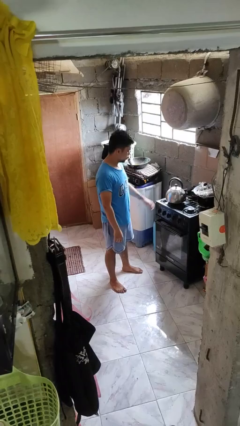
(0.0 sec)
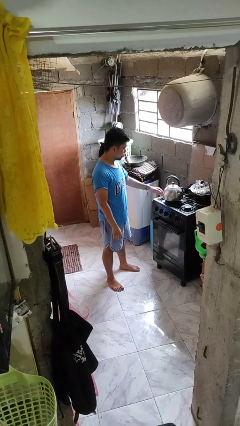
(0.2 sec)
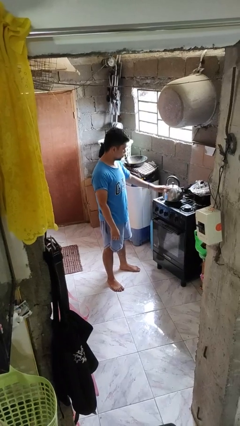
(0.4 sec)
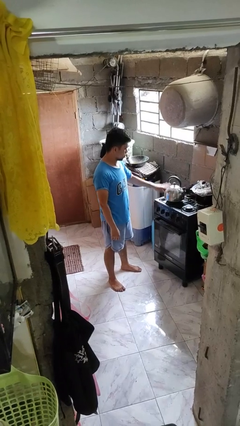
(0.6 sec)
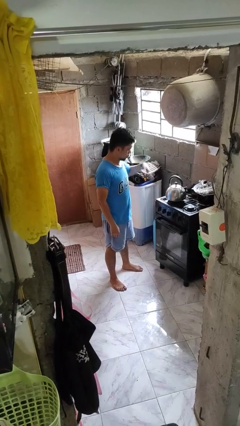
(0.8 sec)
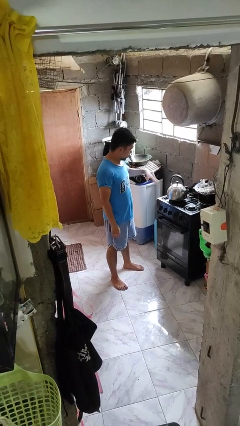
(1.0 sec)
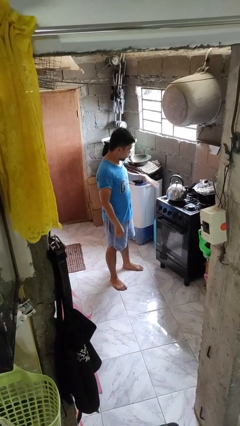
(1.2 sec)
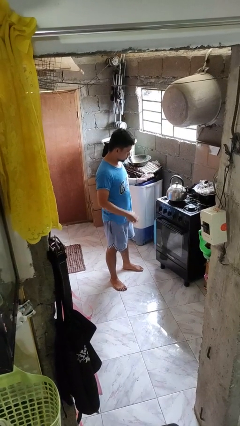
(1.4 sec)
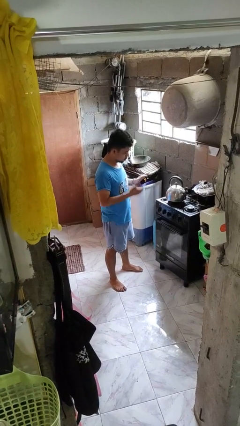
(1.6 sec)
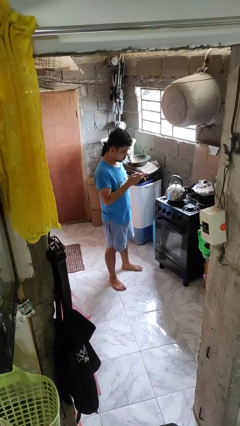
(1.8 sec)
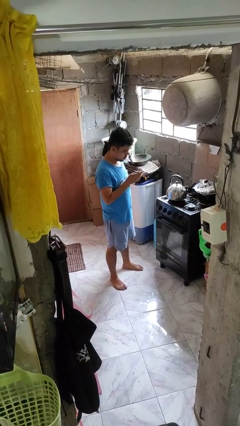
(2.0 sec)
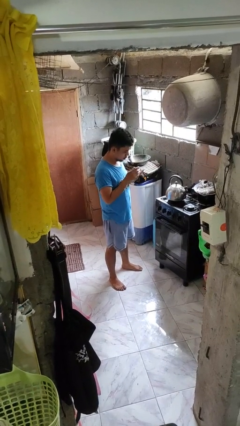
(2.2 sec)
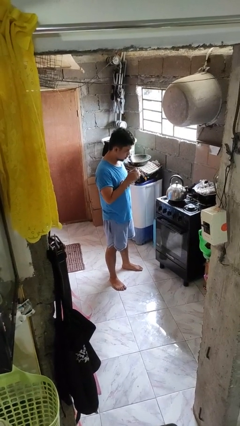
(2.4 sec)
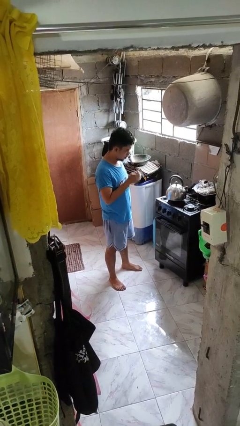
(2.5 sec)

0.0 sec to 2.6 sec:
person burns hand

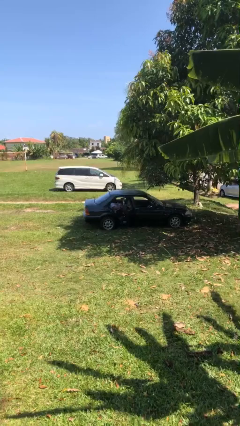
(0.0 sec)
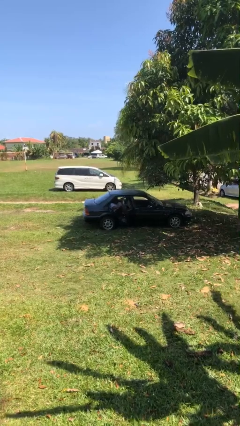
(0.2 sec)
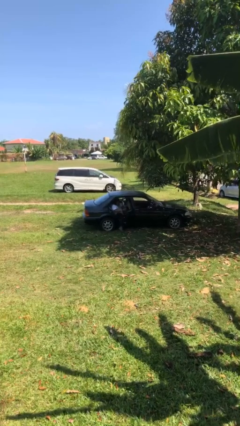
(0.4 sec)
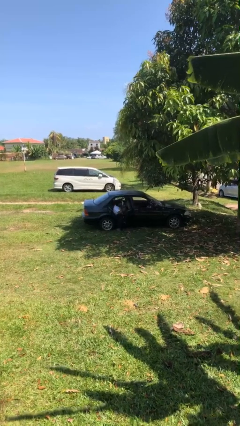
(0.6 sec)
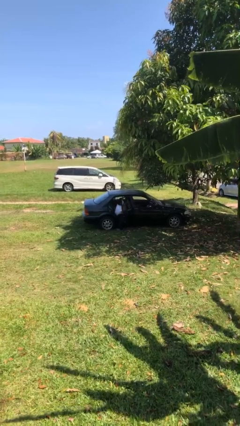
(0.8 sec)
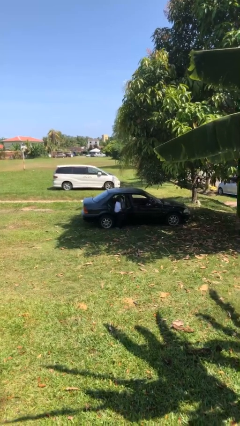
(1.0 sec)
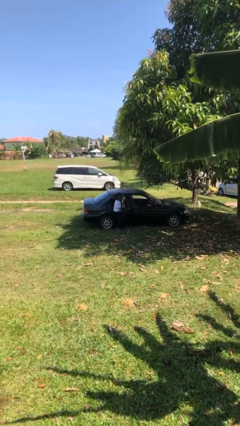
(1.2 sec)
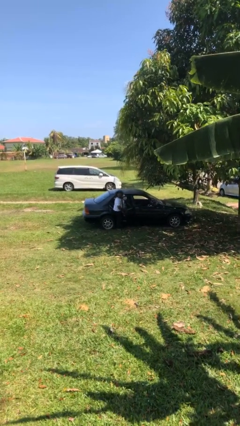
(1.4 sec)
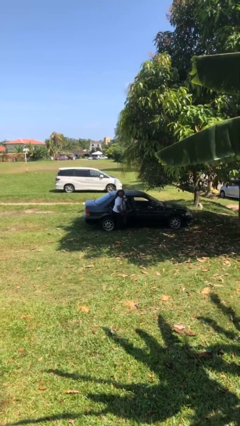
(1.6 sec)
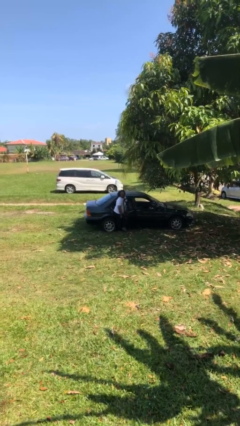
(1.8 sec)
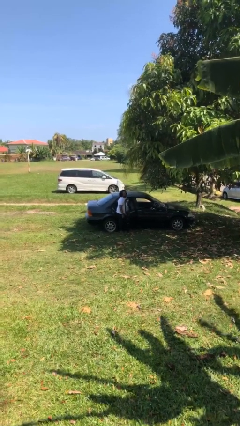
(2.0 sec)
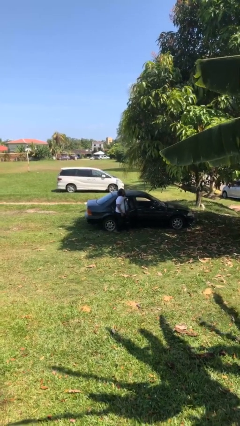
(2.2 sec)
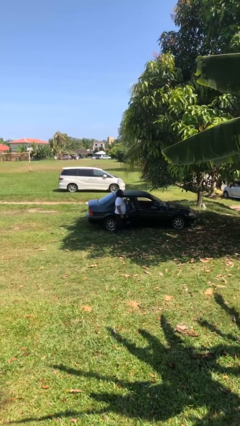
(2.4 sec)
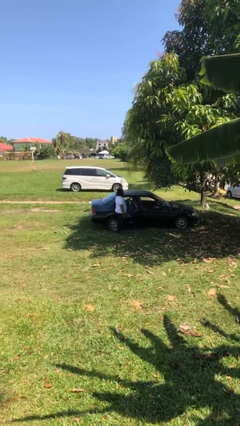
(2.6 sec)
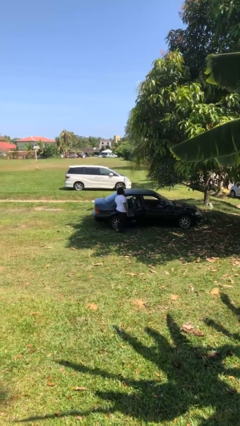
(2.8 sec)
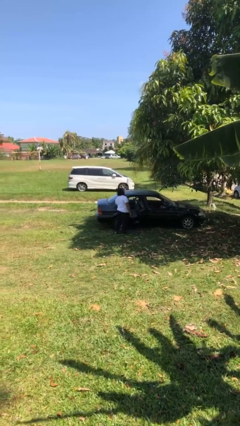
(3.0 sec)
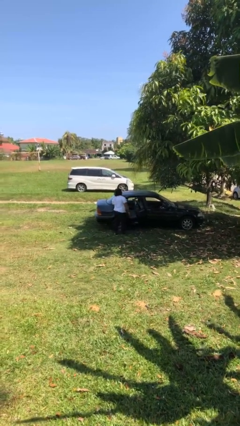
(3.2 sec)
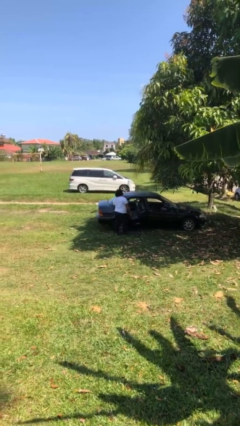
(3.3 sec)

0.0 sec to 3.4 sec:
person exits car

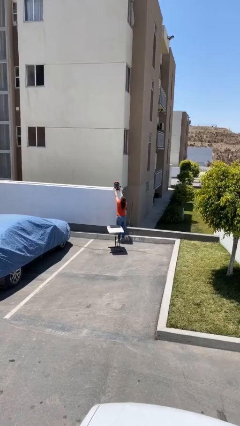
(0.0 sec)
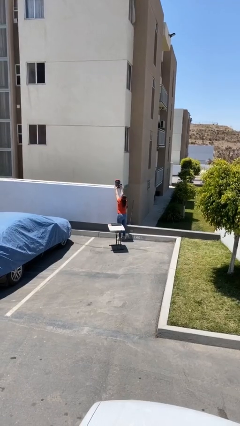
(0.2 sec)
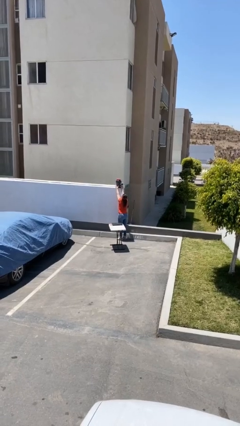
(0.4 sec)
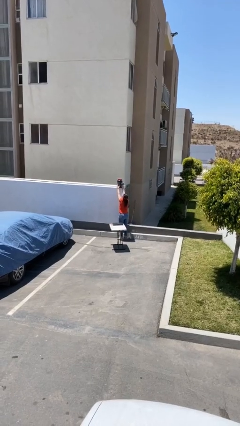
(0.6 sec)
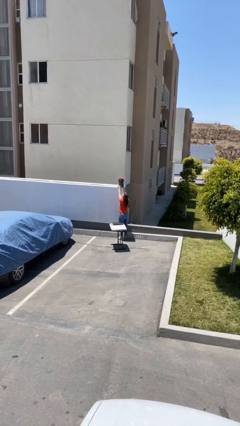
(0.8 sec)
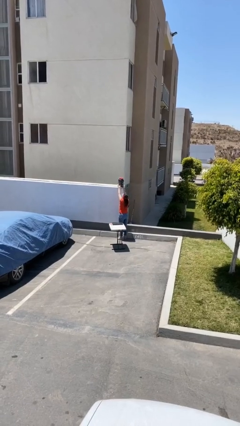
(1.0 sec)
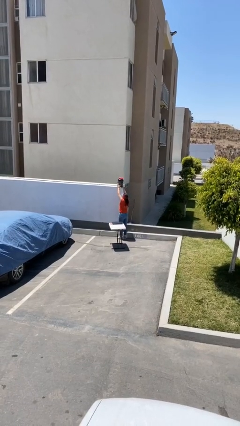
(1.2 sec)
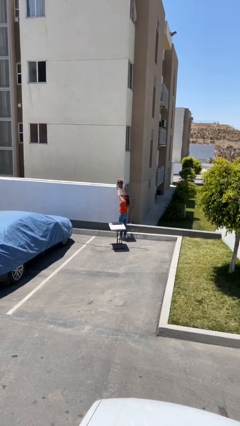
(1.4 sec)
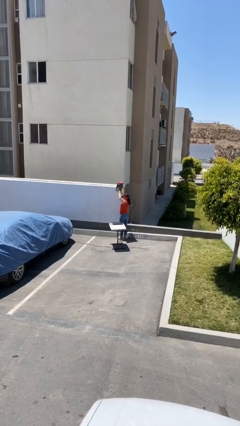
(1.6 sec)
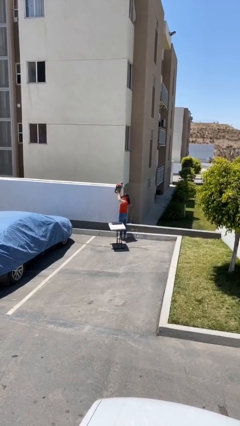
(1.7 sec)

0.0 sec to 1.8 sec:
person picks up object from shelf

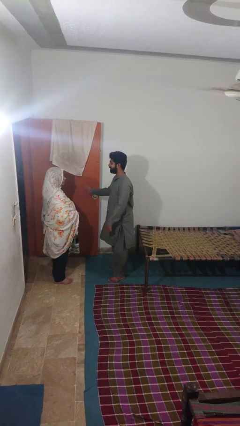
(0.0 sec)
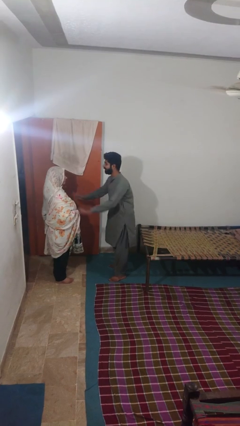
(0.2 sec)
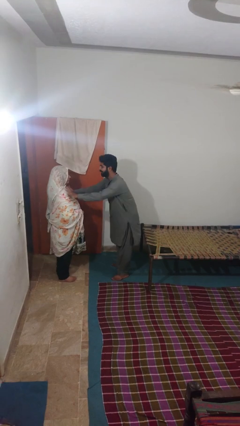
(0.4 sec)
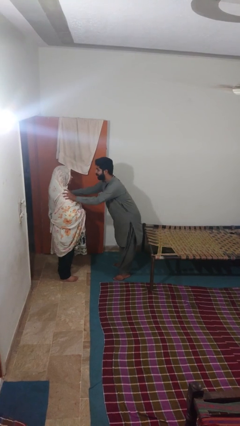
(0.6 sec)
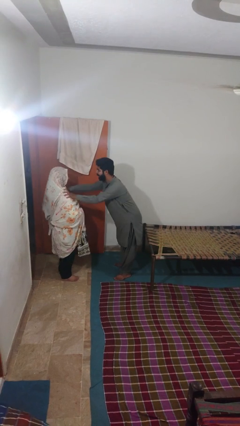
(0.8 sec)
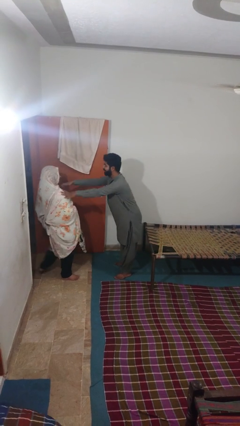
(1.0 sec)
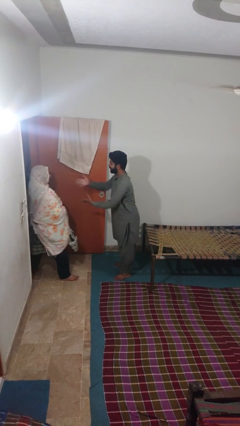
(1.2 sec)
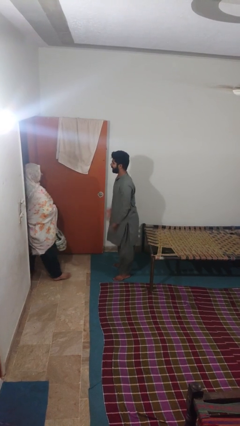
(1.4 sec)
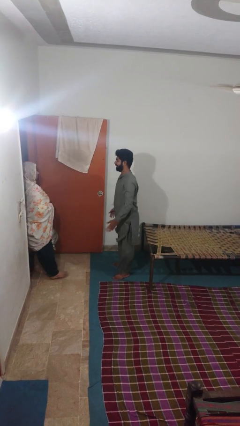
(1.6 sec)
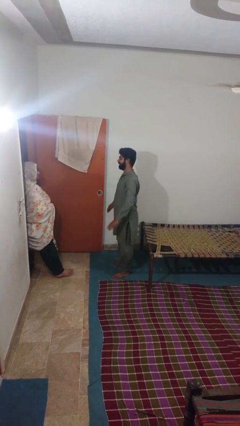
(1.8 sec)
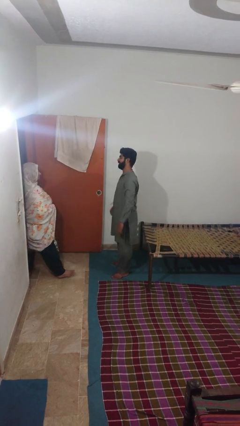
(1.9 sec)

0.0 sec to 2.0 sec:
person shoves person

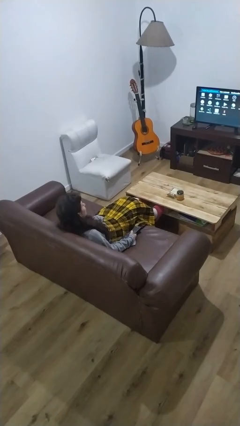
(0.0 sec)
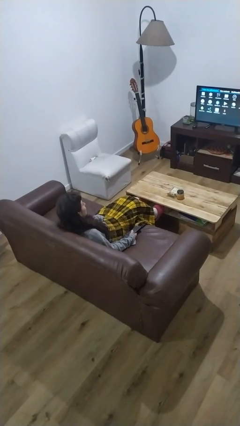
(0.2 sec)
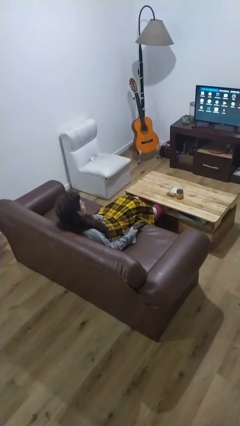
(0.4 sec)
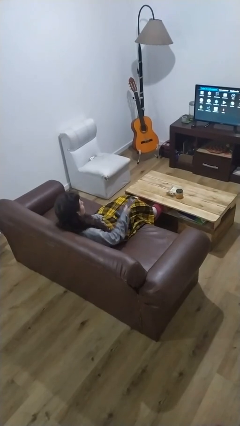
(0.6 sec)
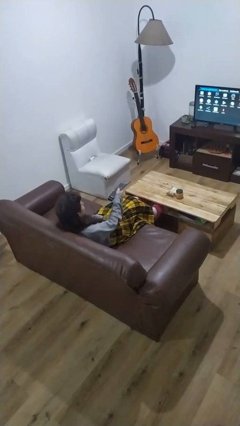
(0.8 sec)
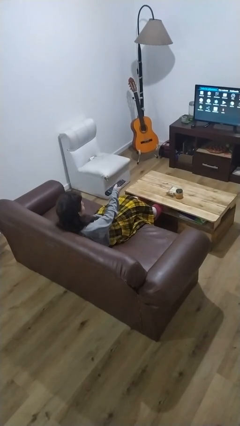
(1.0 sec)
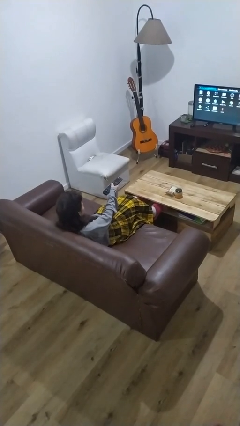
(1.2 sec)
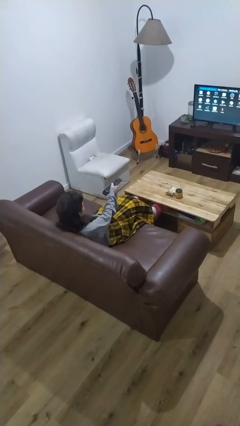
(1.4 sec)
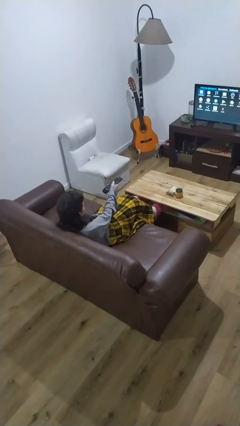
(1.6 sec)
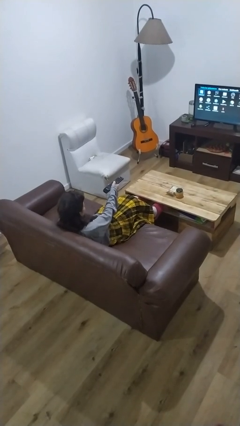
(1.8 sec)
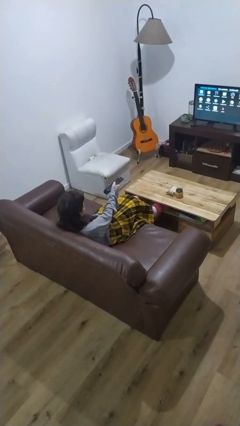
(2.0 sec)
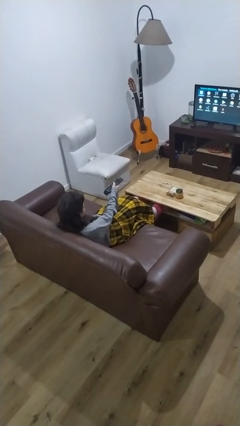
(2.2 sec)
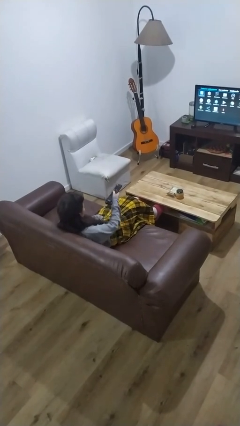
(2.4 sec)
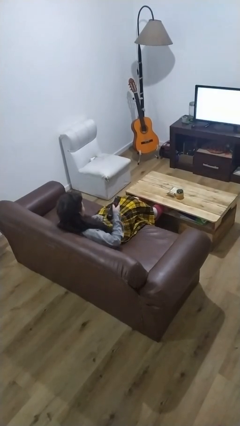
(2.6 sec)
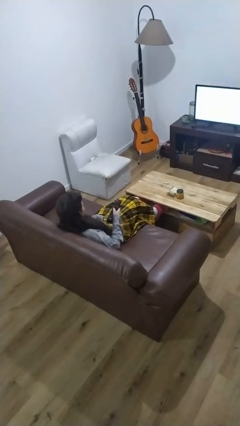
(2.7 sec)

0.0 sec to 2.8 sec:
person uses television remote

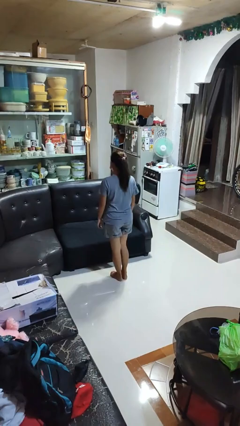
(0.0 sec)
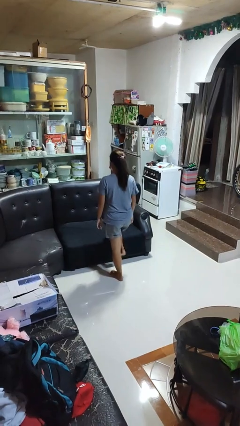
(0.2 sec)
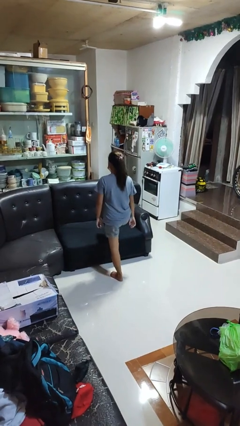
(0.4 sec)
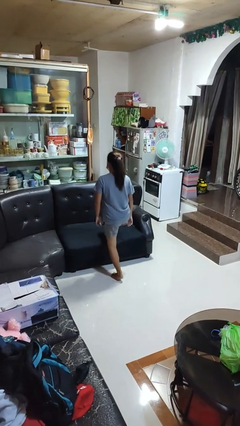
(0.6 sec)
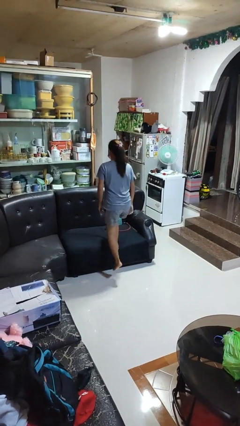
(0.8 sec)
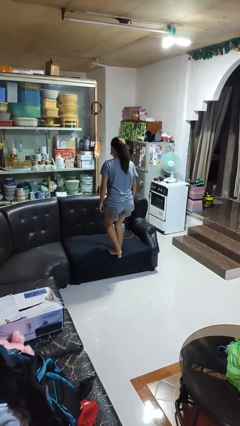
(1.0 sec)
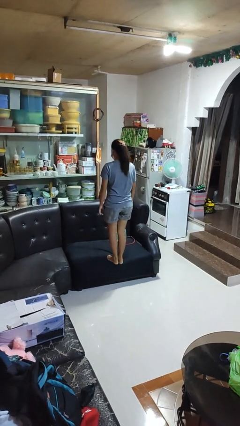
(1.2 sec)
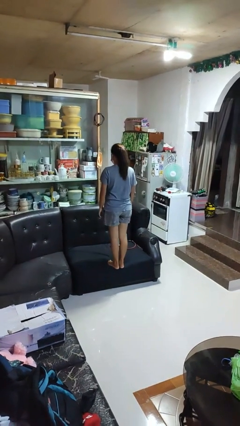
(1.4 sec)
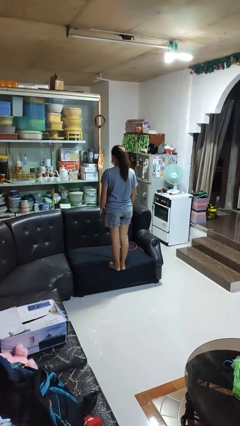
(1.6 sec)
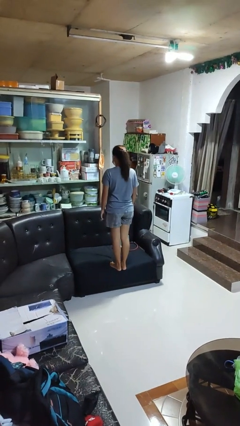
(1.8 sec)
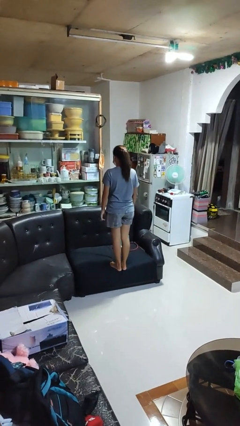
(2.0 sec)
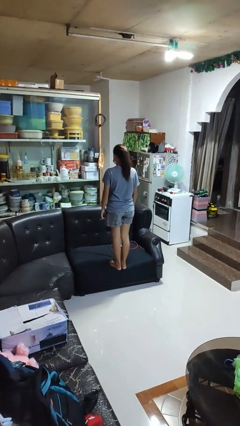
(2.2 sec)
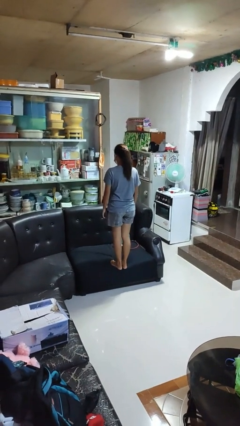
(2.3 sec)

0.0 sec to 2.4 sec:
person climbs on couch

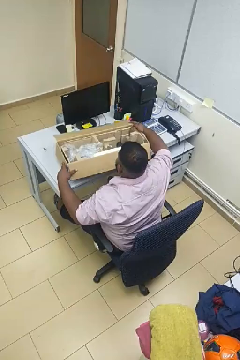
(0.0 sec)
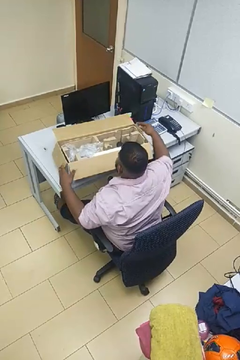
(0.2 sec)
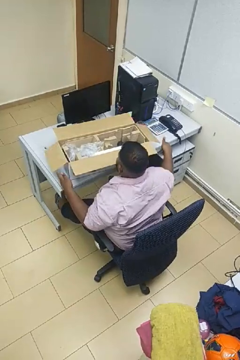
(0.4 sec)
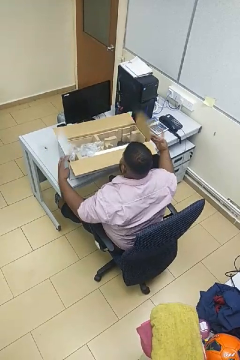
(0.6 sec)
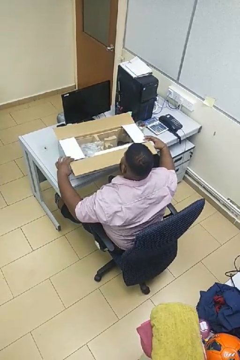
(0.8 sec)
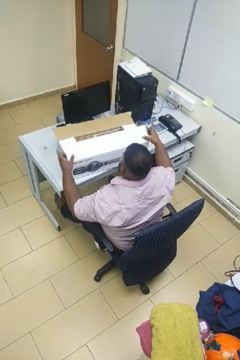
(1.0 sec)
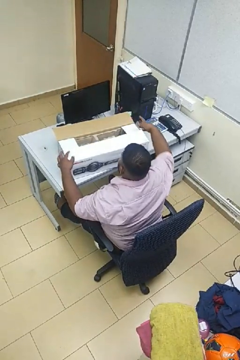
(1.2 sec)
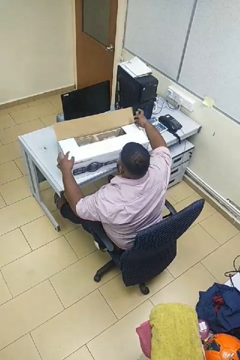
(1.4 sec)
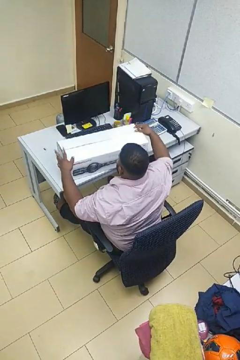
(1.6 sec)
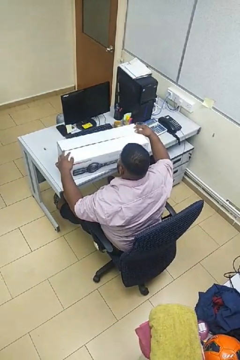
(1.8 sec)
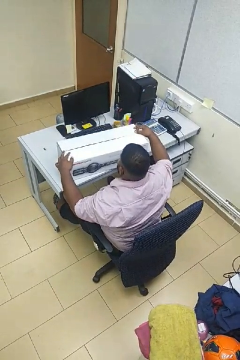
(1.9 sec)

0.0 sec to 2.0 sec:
person closes box

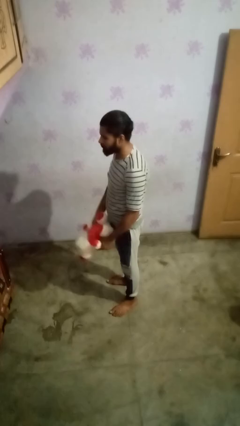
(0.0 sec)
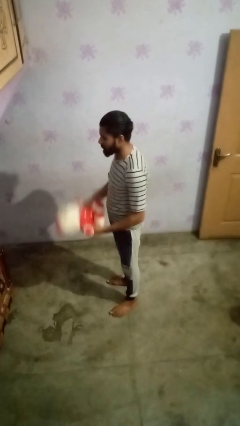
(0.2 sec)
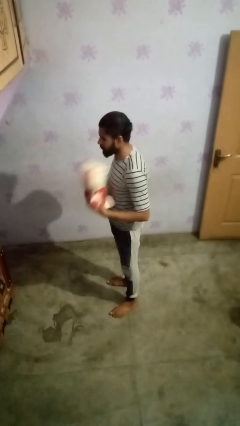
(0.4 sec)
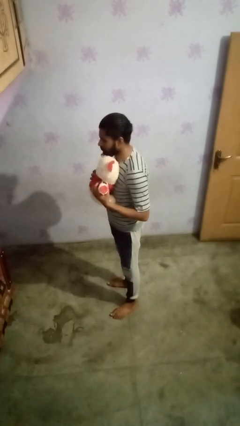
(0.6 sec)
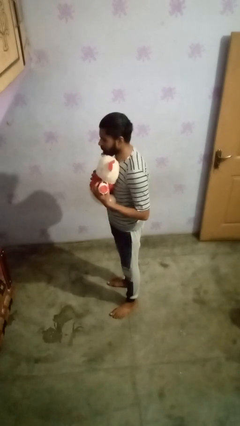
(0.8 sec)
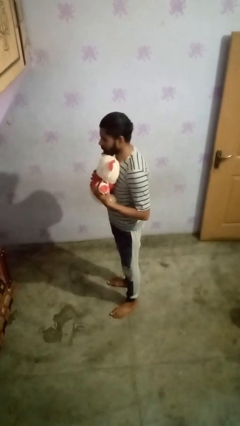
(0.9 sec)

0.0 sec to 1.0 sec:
person hugs stuffed animal
